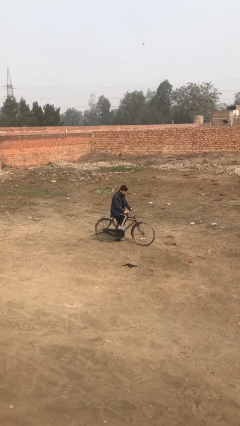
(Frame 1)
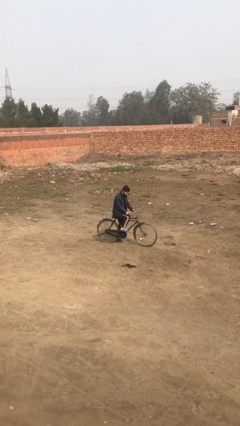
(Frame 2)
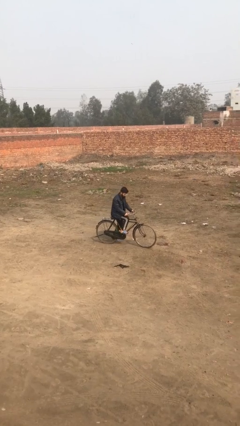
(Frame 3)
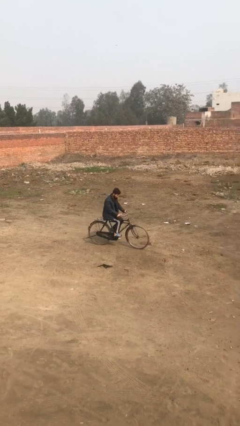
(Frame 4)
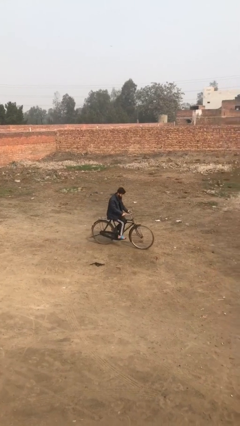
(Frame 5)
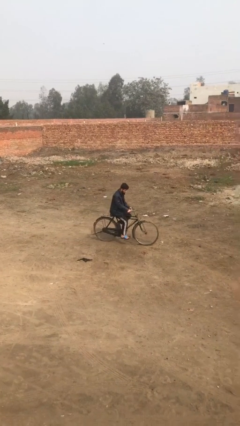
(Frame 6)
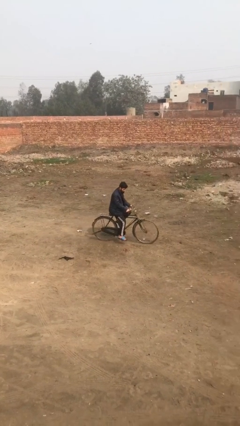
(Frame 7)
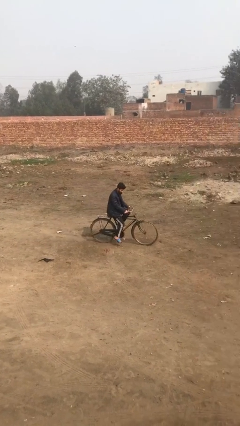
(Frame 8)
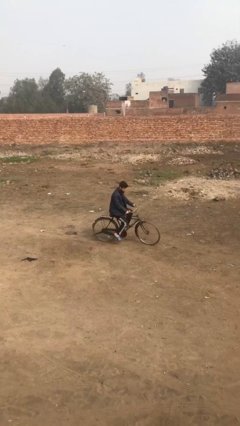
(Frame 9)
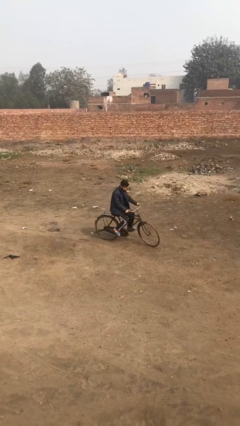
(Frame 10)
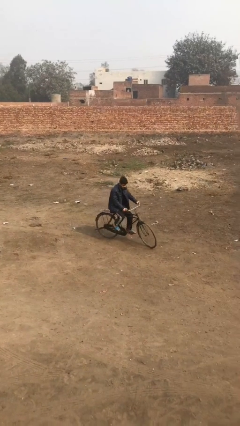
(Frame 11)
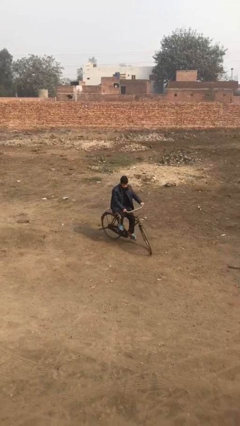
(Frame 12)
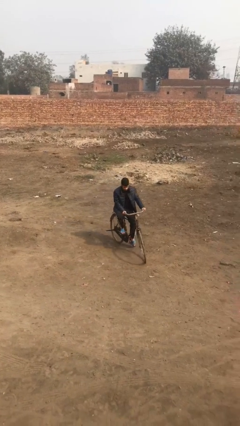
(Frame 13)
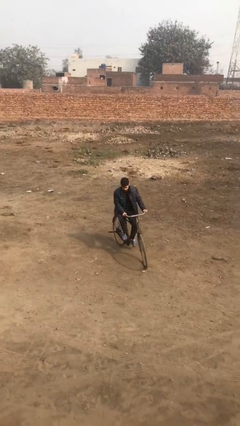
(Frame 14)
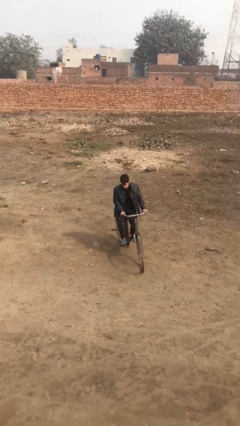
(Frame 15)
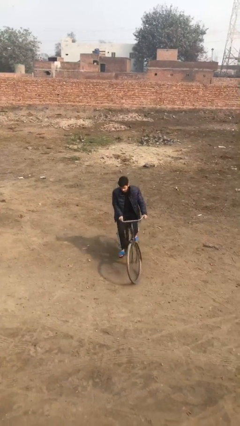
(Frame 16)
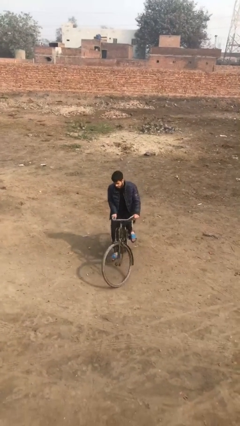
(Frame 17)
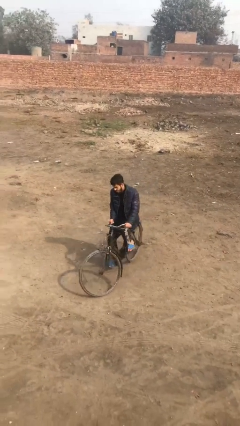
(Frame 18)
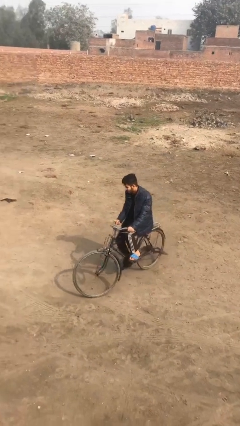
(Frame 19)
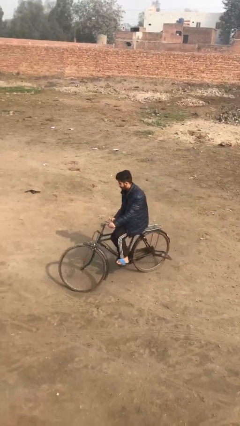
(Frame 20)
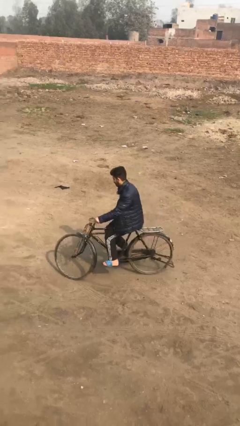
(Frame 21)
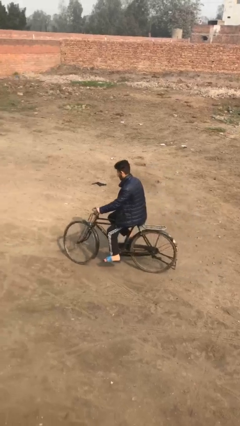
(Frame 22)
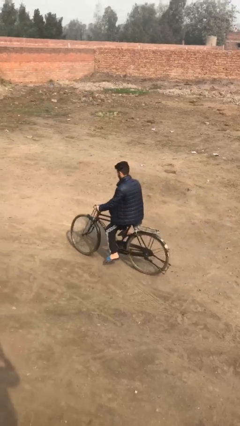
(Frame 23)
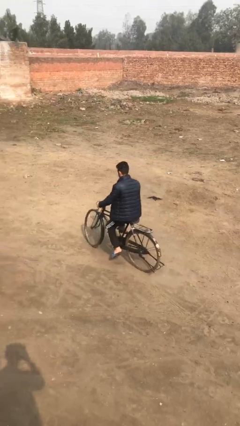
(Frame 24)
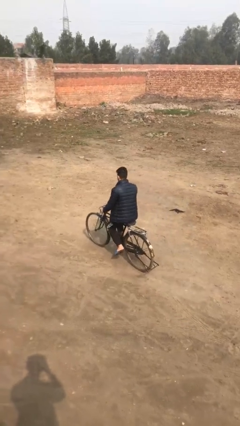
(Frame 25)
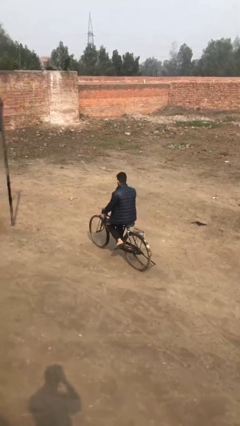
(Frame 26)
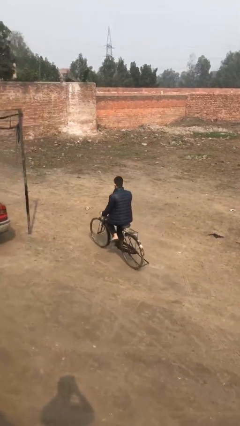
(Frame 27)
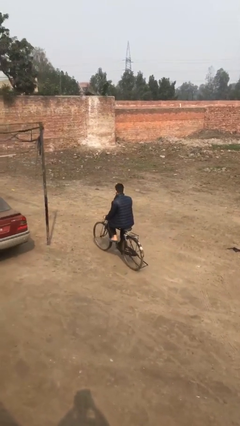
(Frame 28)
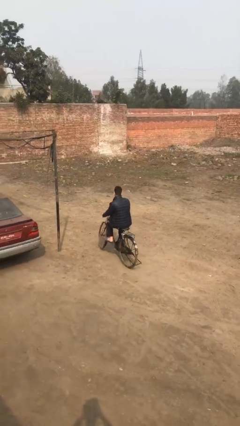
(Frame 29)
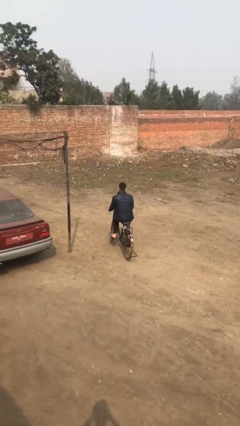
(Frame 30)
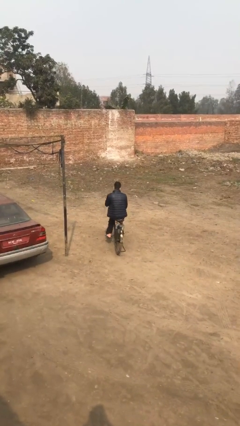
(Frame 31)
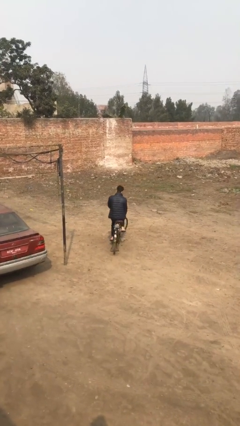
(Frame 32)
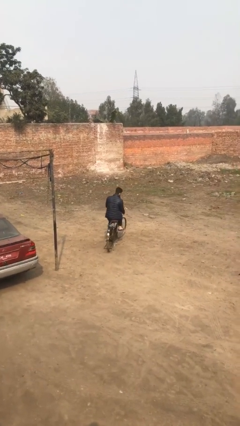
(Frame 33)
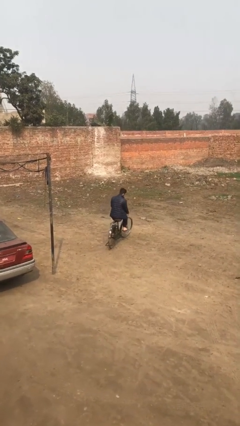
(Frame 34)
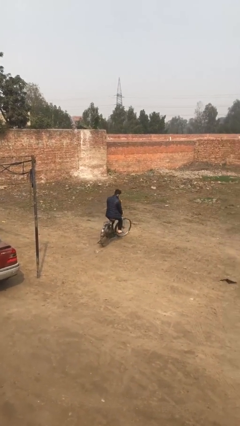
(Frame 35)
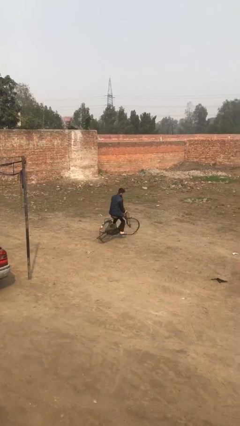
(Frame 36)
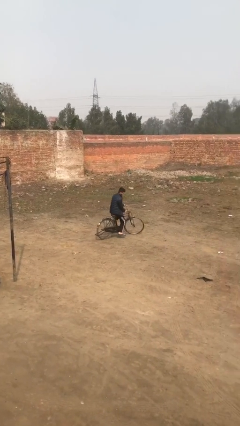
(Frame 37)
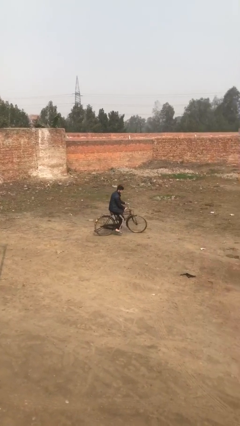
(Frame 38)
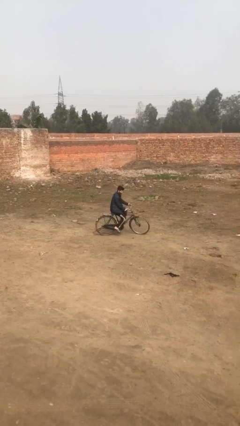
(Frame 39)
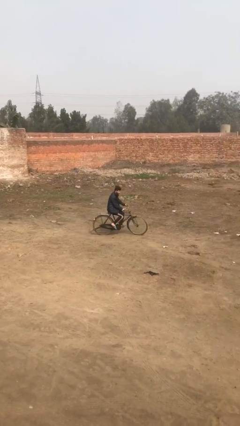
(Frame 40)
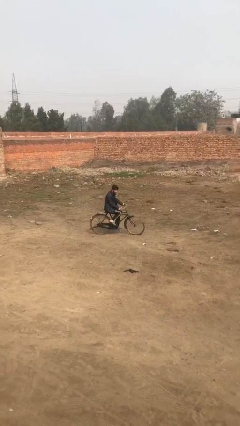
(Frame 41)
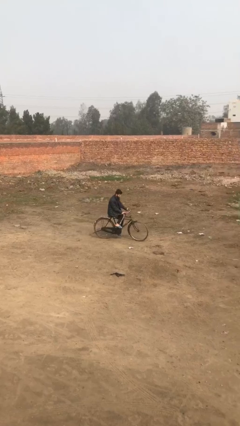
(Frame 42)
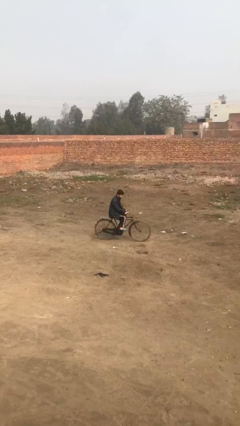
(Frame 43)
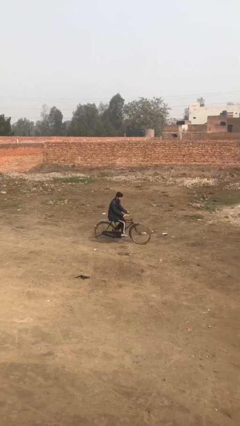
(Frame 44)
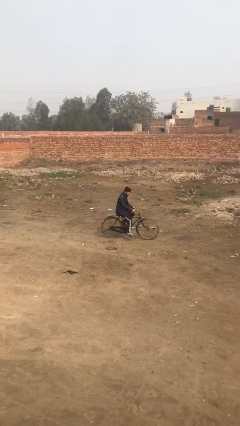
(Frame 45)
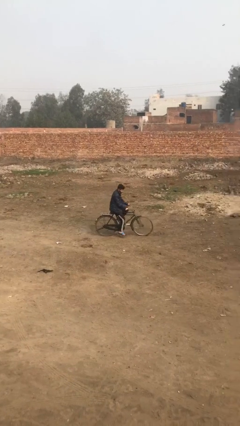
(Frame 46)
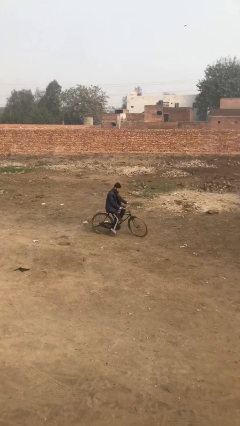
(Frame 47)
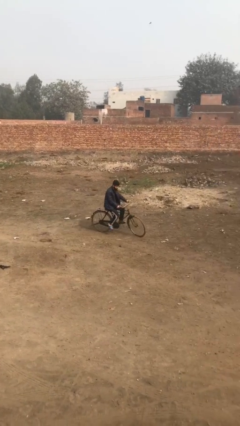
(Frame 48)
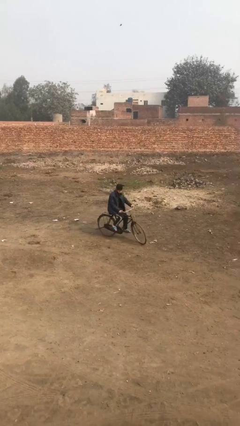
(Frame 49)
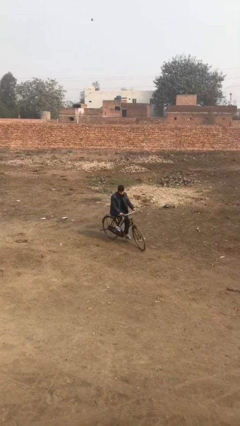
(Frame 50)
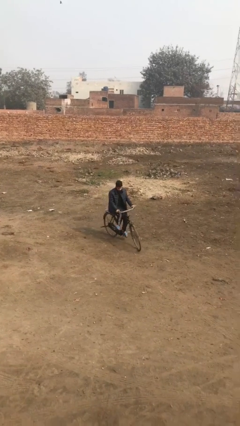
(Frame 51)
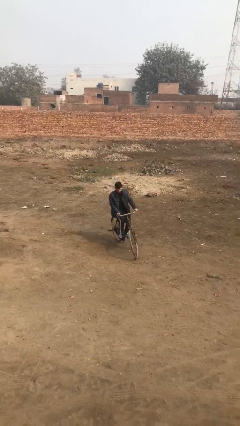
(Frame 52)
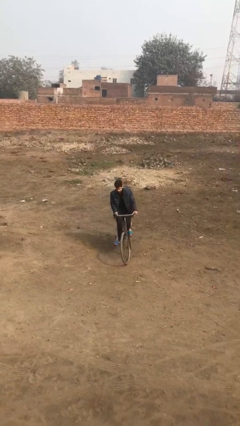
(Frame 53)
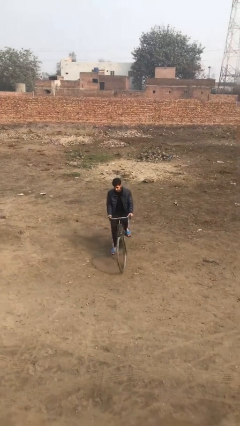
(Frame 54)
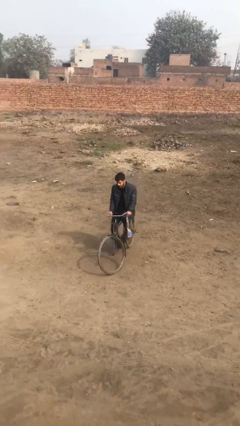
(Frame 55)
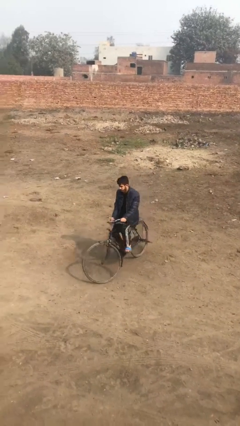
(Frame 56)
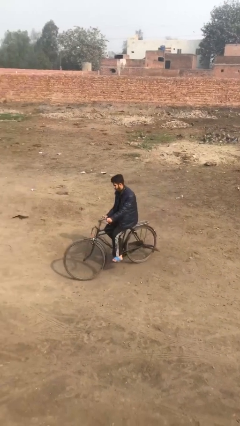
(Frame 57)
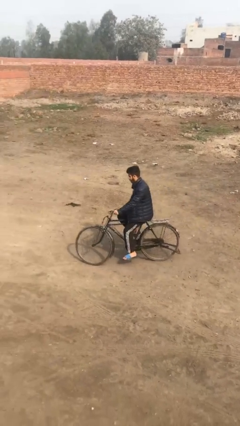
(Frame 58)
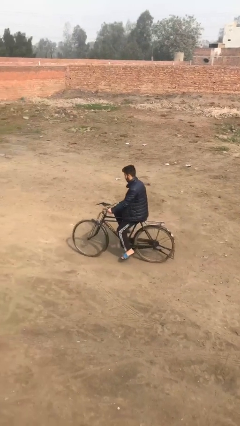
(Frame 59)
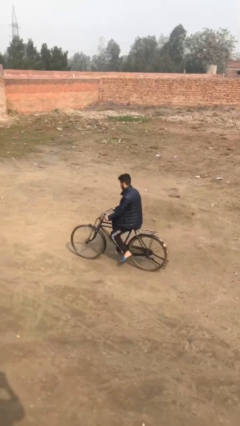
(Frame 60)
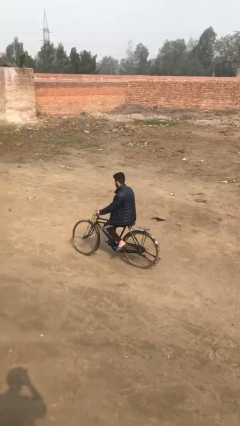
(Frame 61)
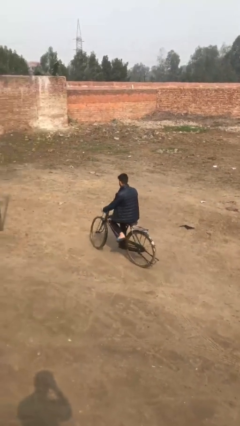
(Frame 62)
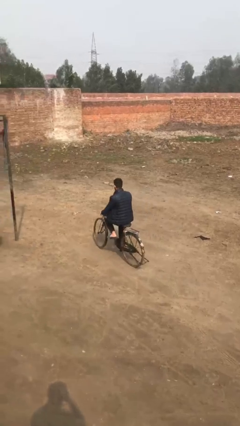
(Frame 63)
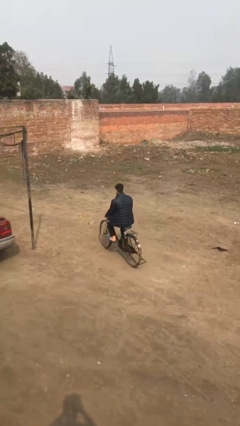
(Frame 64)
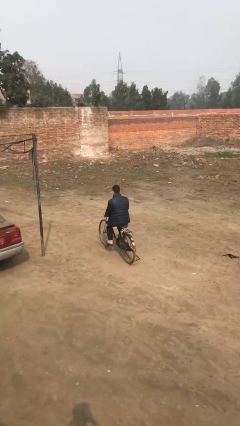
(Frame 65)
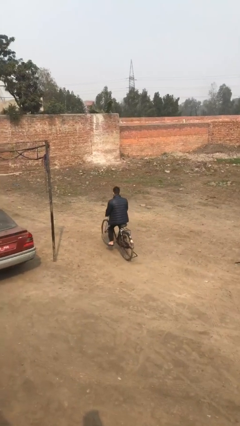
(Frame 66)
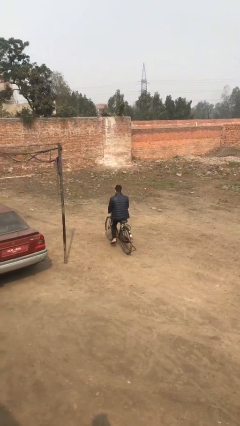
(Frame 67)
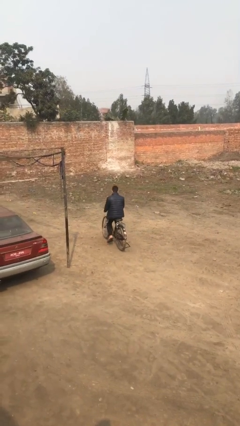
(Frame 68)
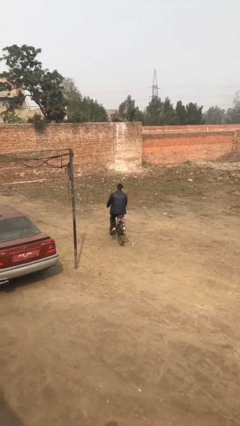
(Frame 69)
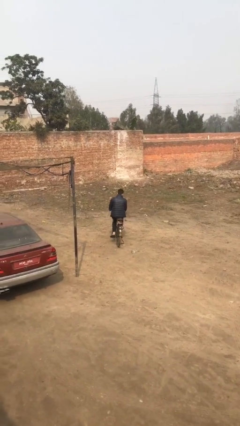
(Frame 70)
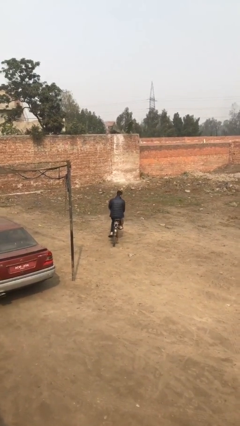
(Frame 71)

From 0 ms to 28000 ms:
person rides bicycle

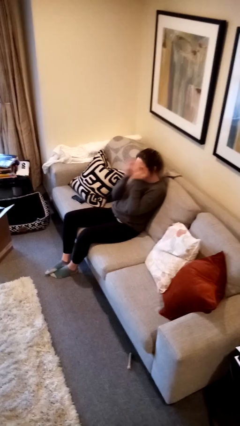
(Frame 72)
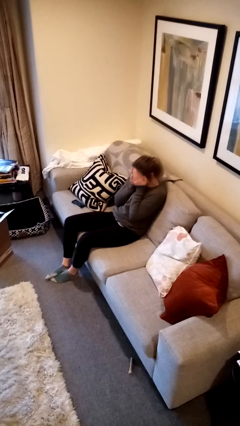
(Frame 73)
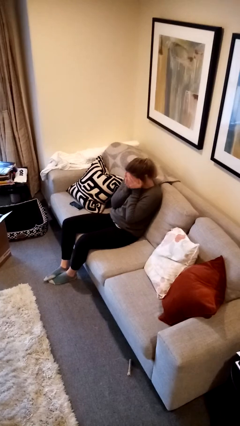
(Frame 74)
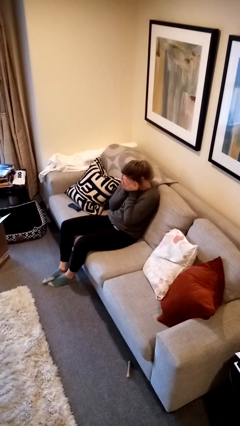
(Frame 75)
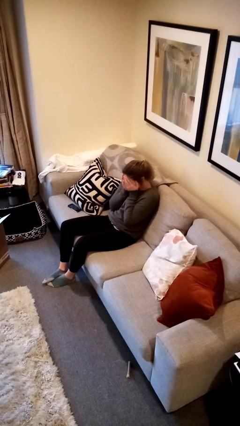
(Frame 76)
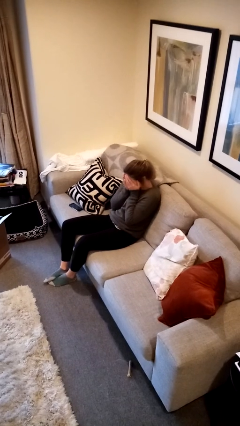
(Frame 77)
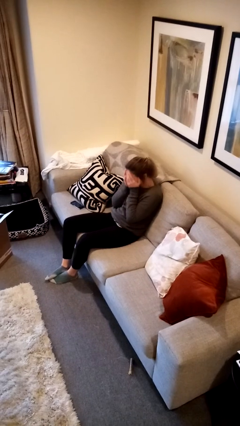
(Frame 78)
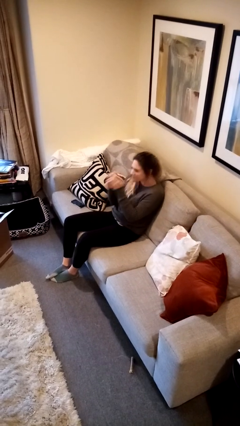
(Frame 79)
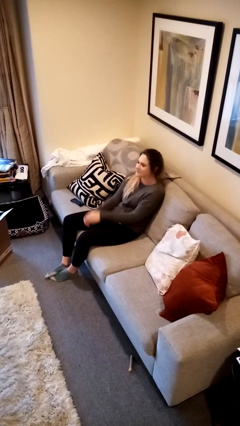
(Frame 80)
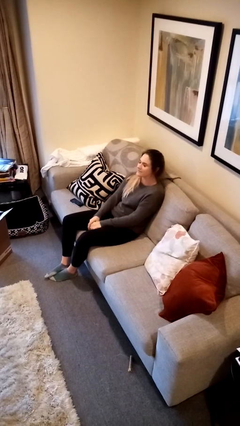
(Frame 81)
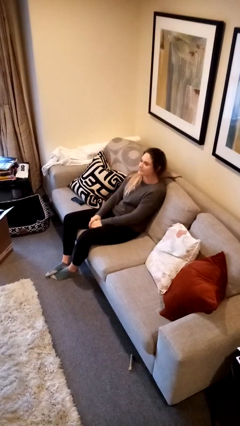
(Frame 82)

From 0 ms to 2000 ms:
person covers face with hands

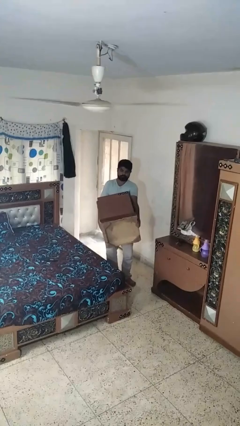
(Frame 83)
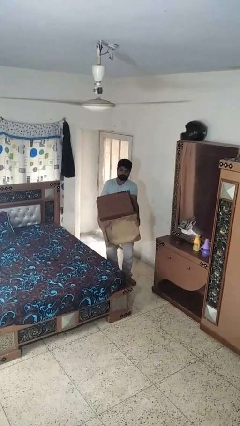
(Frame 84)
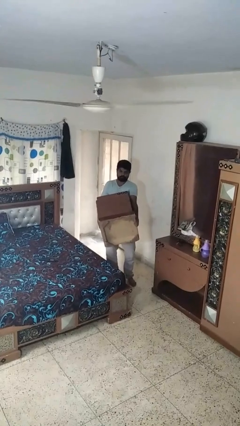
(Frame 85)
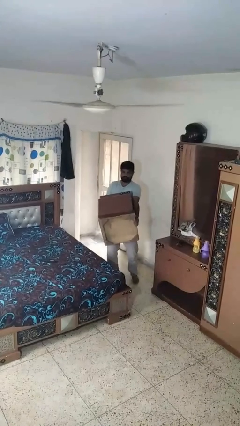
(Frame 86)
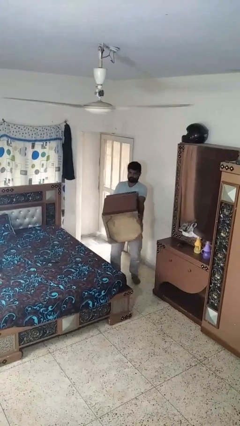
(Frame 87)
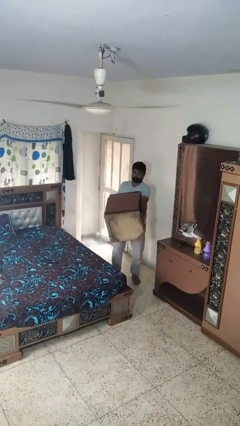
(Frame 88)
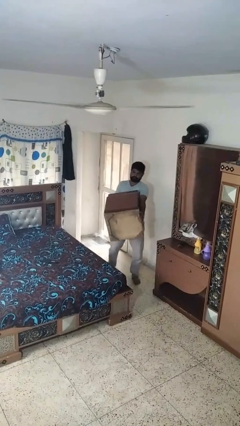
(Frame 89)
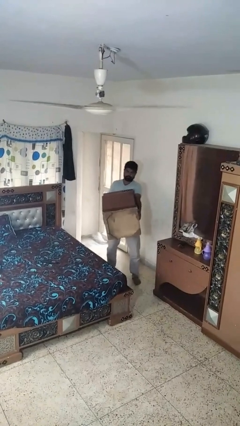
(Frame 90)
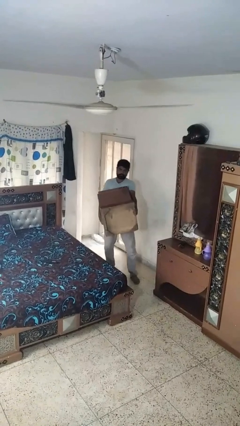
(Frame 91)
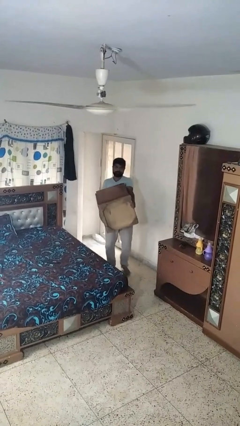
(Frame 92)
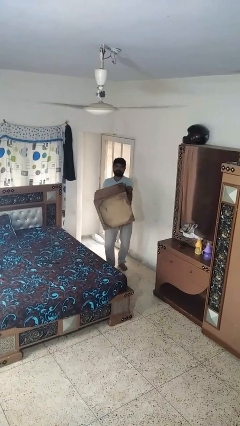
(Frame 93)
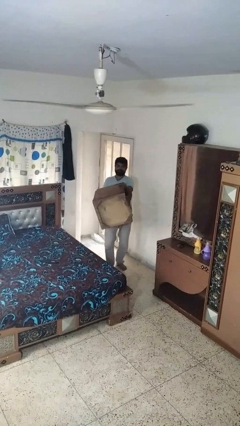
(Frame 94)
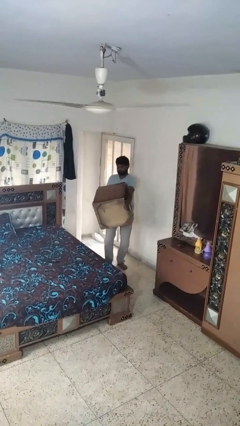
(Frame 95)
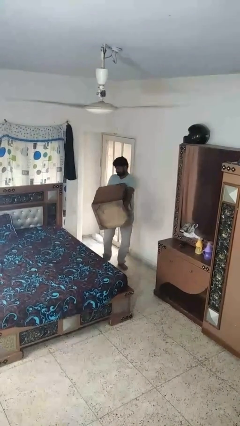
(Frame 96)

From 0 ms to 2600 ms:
person carries furniture
